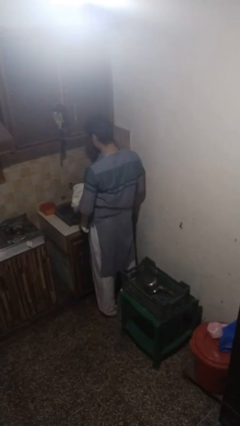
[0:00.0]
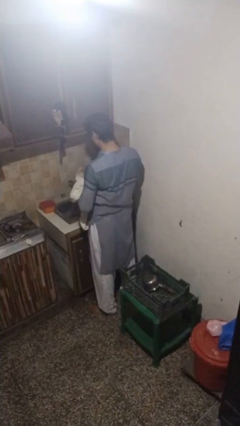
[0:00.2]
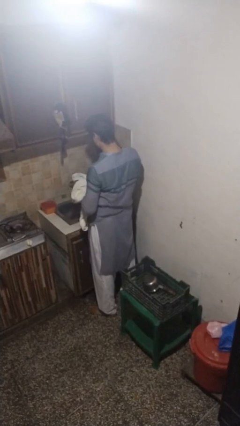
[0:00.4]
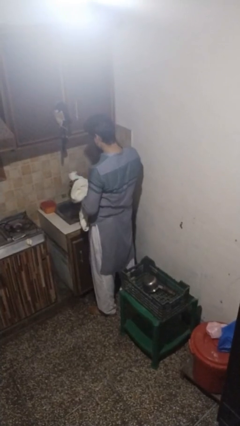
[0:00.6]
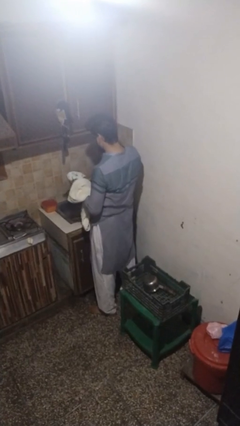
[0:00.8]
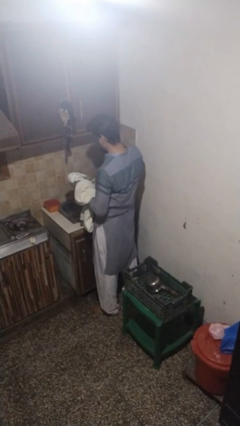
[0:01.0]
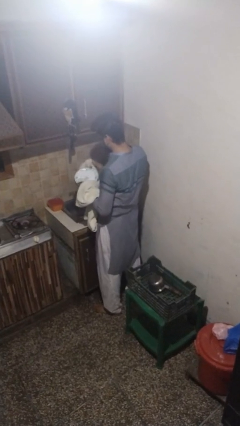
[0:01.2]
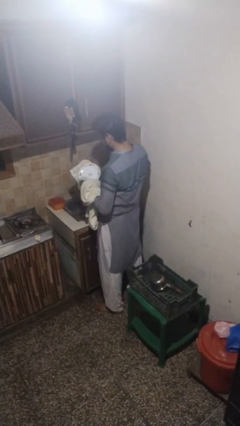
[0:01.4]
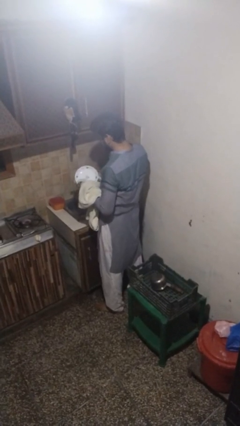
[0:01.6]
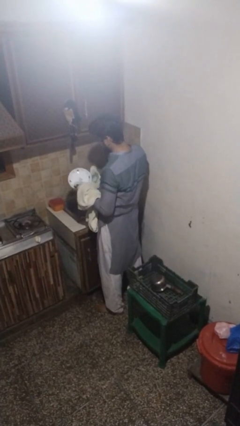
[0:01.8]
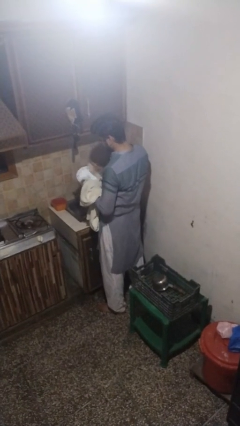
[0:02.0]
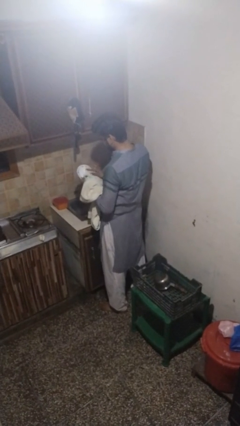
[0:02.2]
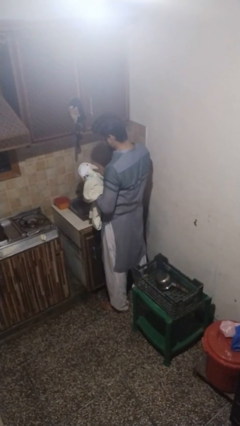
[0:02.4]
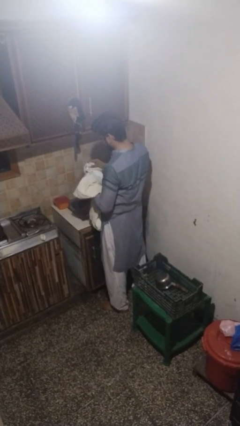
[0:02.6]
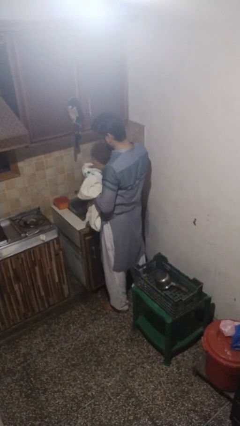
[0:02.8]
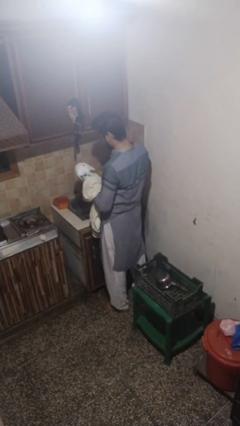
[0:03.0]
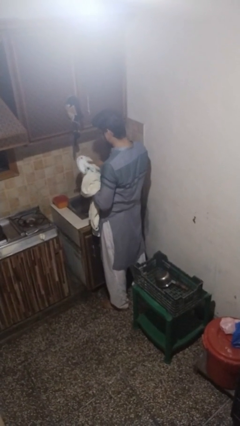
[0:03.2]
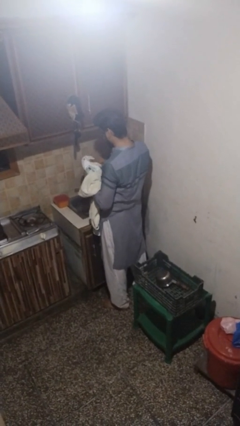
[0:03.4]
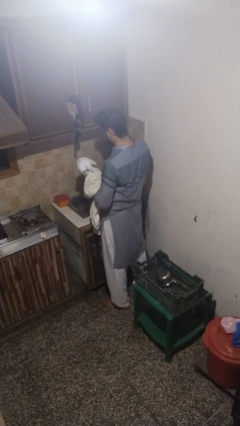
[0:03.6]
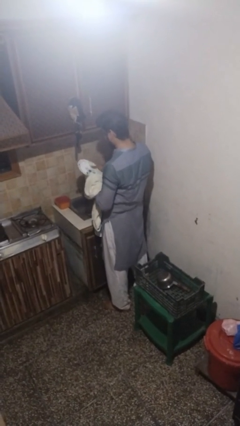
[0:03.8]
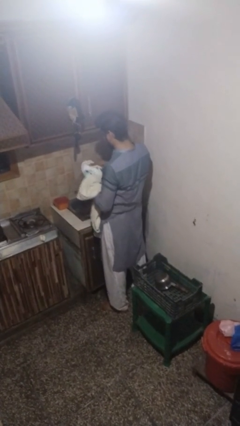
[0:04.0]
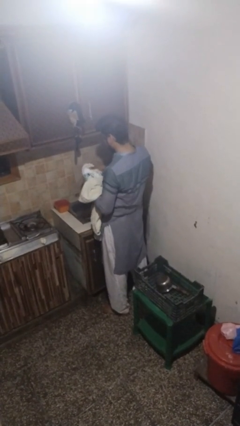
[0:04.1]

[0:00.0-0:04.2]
person dries dish

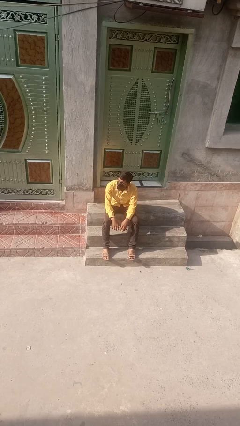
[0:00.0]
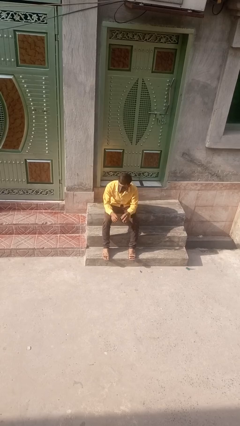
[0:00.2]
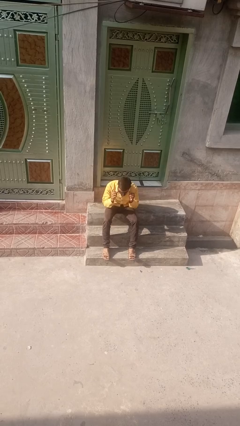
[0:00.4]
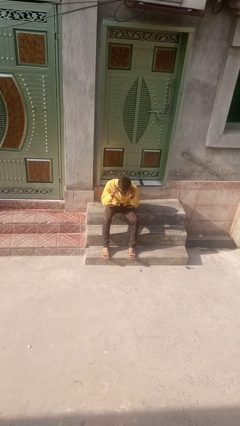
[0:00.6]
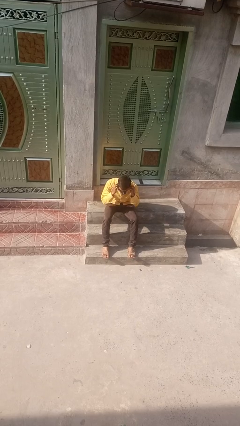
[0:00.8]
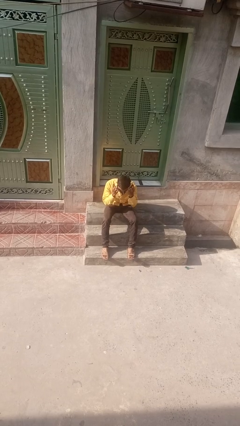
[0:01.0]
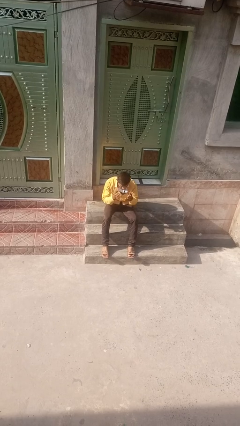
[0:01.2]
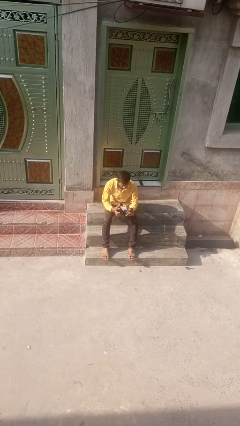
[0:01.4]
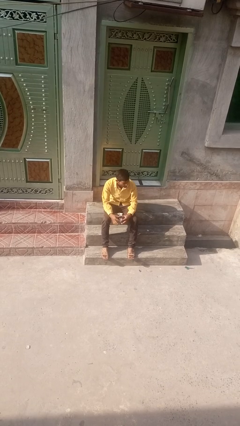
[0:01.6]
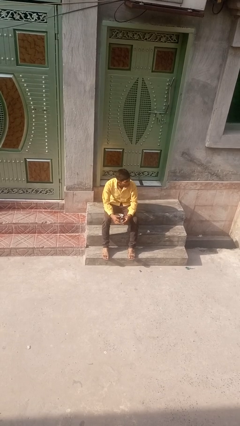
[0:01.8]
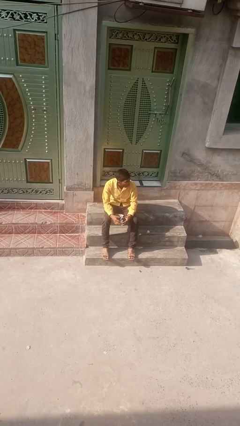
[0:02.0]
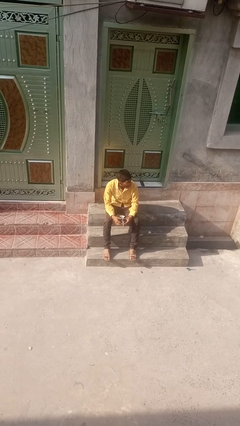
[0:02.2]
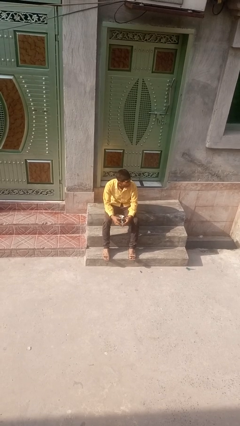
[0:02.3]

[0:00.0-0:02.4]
person takes off facemask

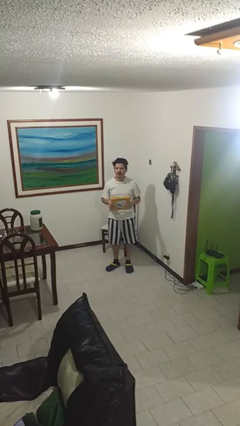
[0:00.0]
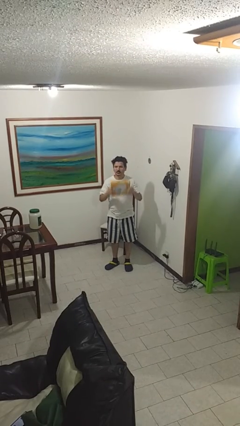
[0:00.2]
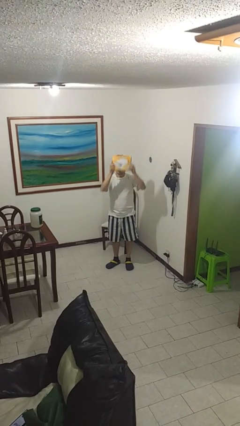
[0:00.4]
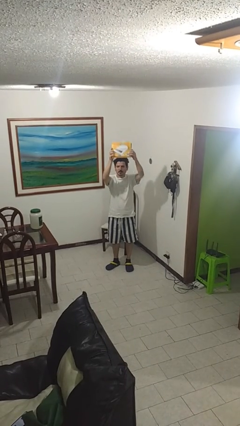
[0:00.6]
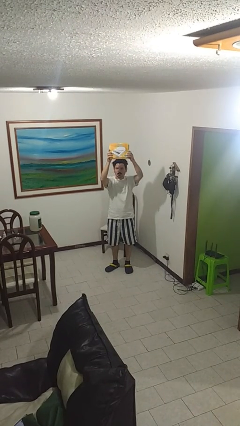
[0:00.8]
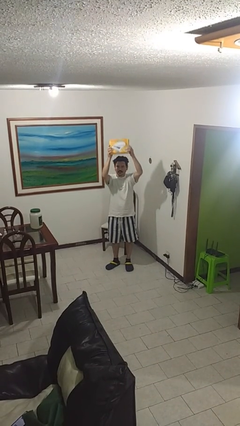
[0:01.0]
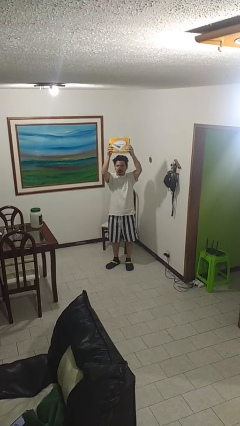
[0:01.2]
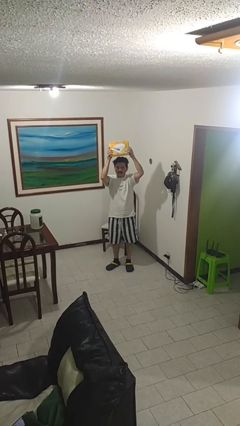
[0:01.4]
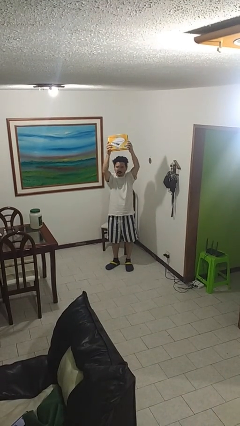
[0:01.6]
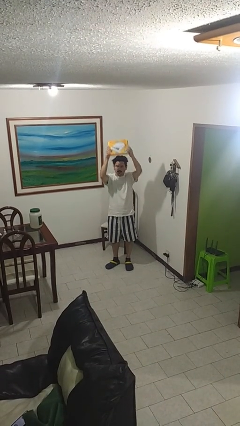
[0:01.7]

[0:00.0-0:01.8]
person holds object above head

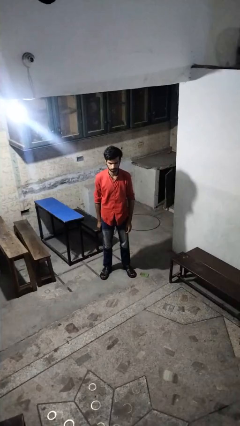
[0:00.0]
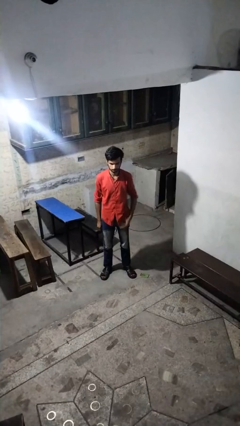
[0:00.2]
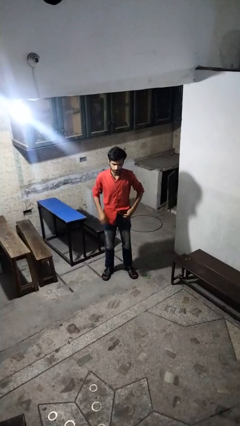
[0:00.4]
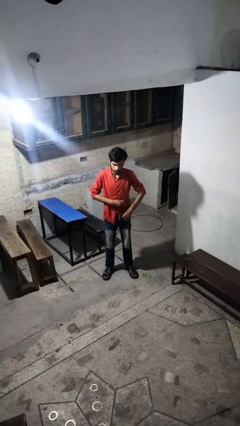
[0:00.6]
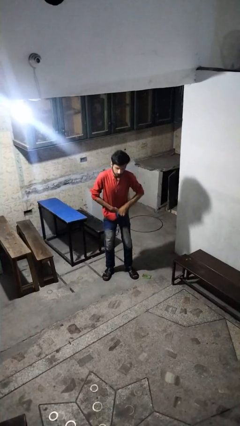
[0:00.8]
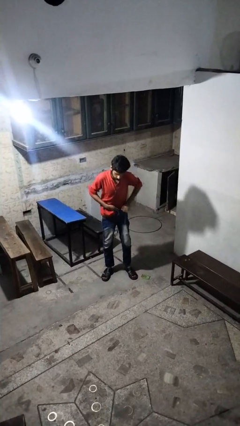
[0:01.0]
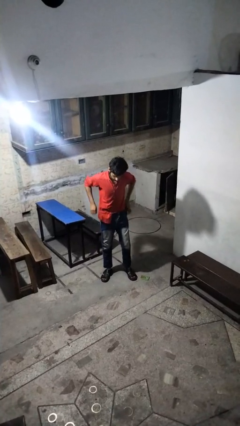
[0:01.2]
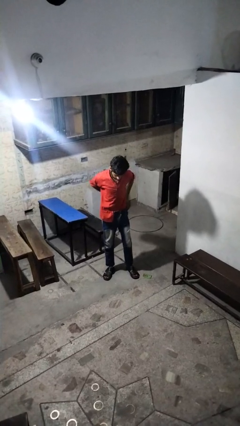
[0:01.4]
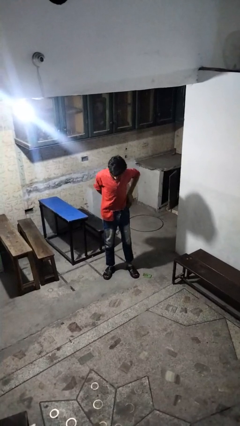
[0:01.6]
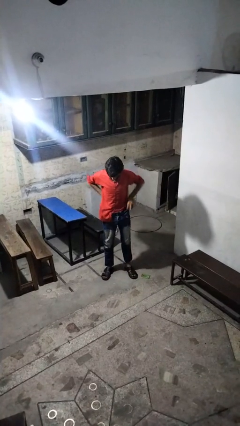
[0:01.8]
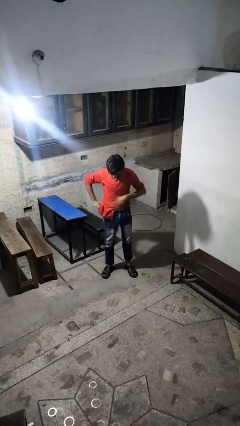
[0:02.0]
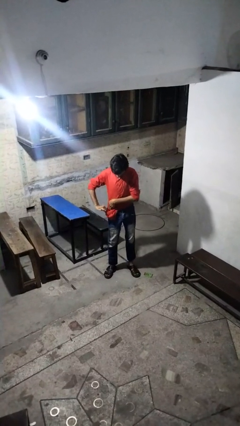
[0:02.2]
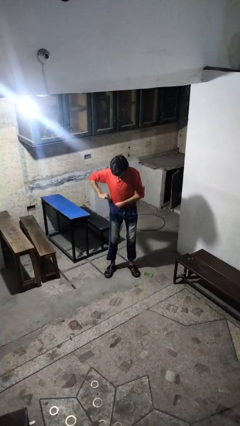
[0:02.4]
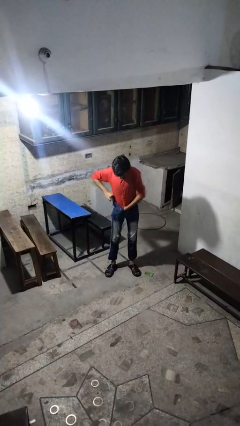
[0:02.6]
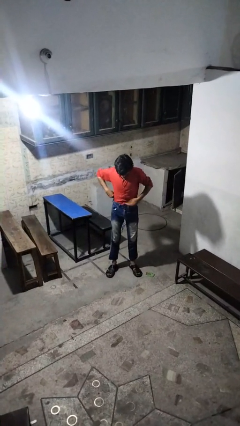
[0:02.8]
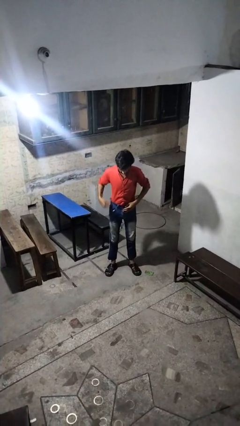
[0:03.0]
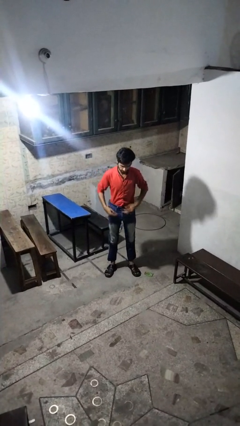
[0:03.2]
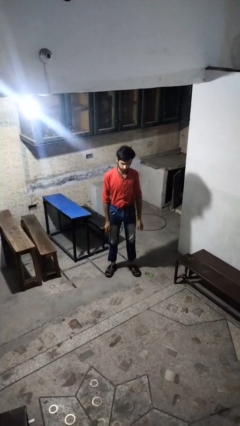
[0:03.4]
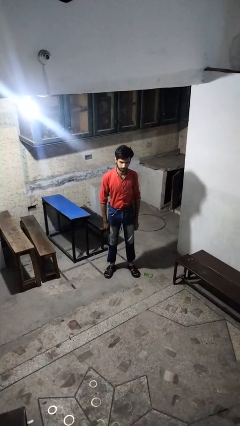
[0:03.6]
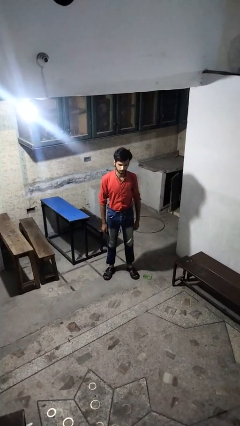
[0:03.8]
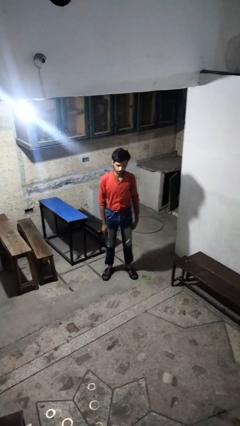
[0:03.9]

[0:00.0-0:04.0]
person tucks in shirt

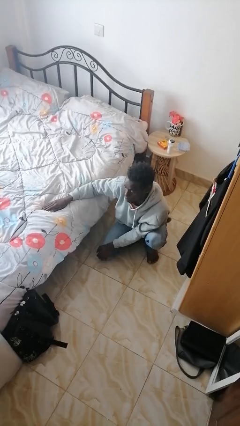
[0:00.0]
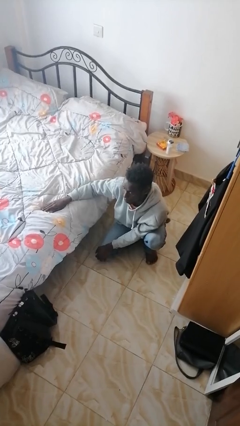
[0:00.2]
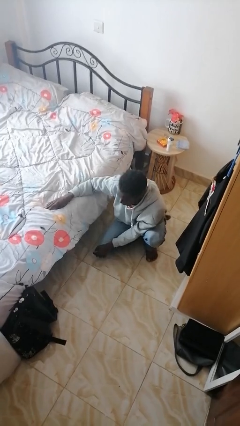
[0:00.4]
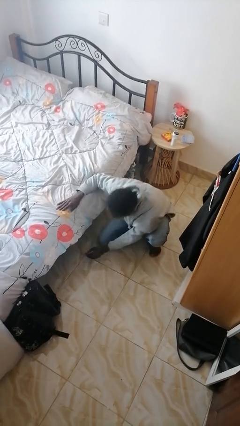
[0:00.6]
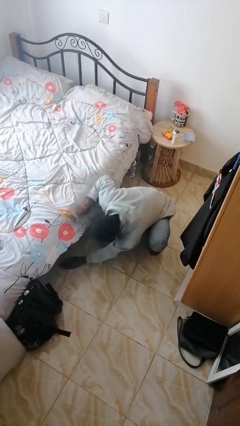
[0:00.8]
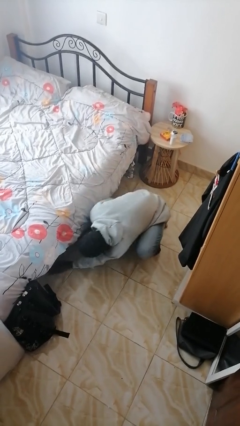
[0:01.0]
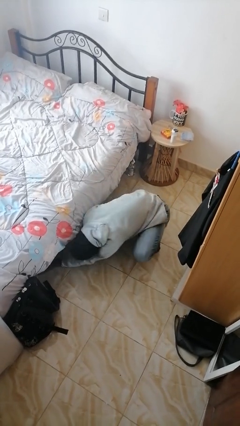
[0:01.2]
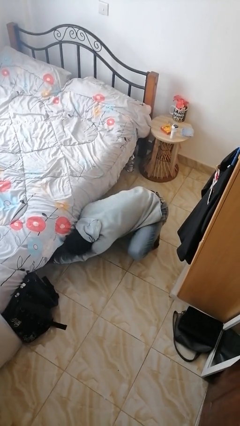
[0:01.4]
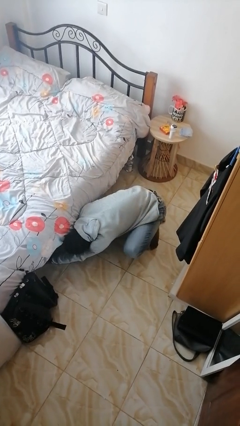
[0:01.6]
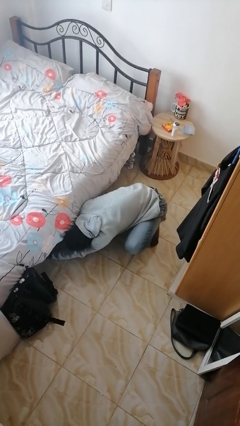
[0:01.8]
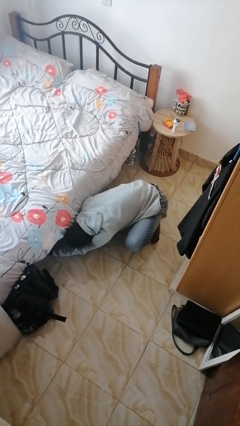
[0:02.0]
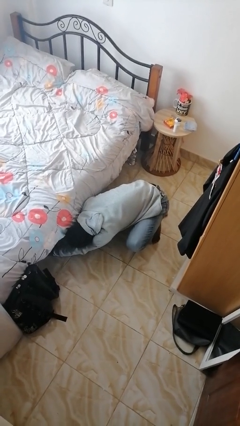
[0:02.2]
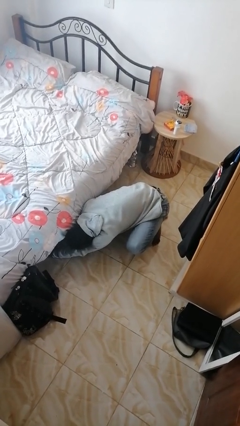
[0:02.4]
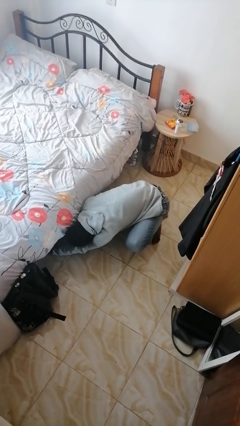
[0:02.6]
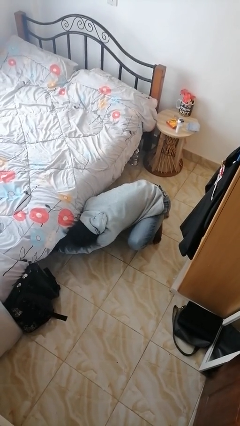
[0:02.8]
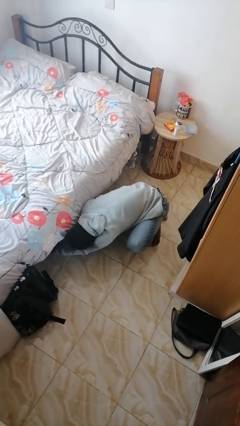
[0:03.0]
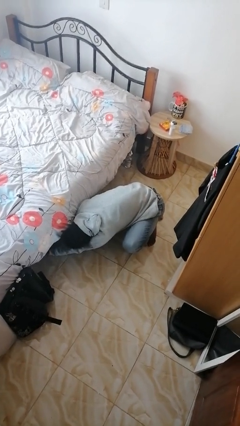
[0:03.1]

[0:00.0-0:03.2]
person searches under bed

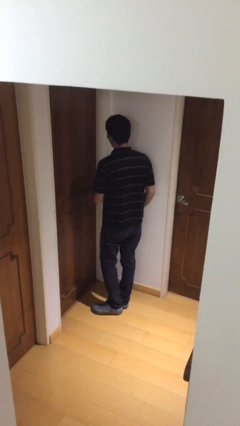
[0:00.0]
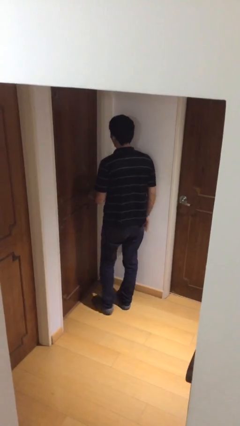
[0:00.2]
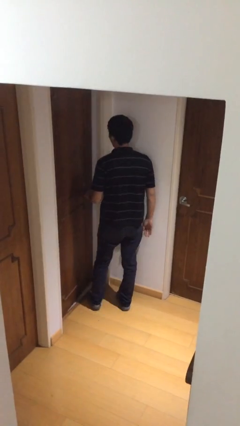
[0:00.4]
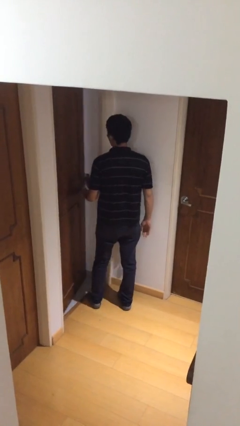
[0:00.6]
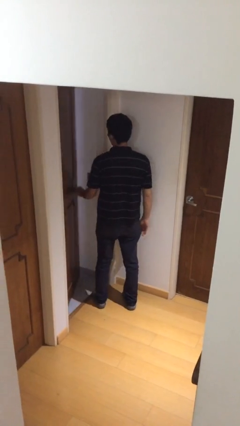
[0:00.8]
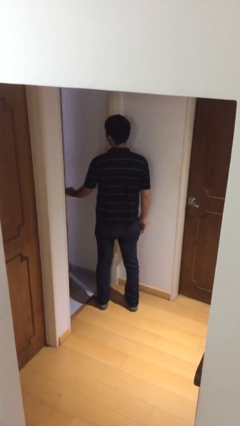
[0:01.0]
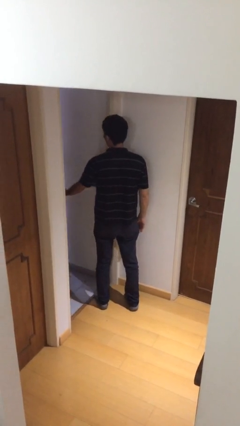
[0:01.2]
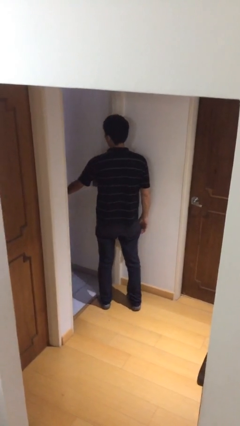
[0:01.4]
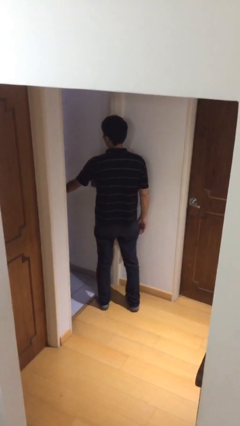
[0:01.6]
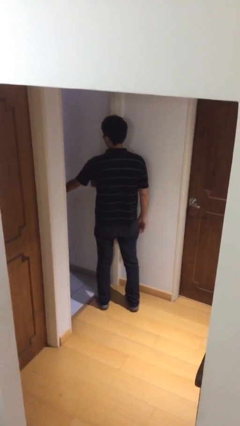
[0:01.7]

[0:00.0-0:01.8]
person opens facility door
